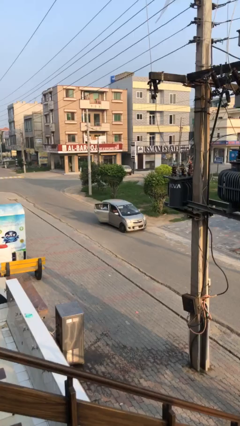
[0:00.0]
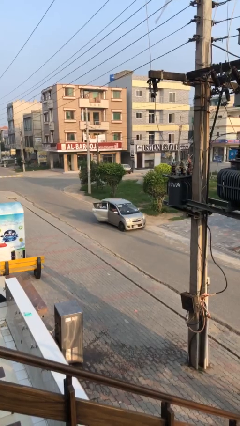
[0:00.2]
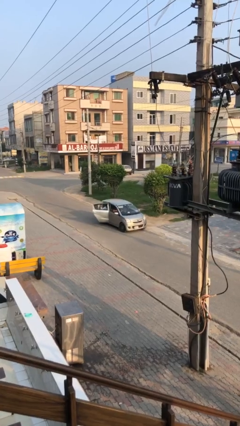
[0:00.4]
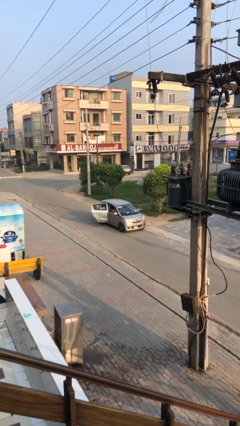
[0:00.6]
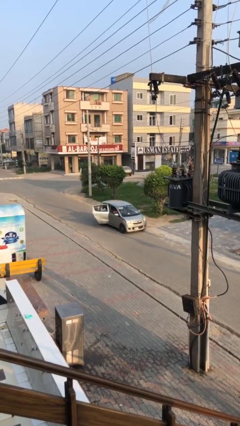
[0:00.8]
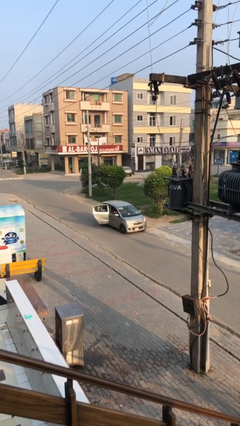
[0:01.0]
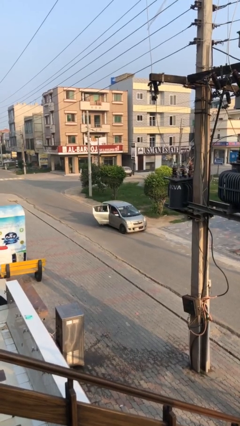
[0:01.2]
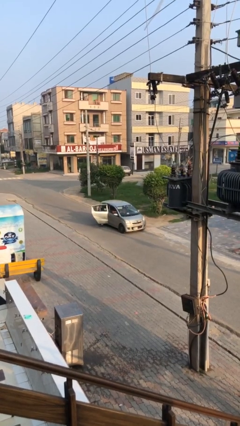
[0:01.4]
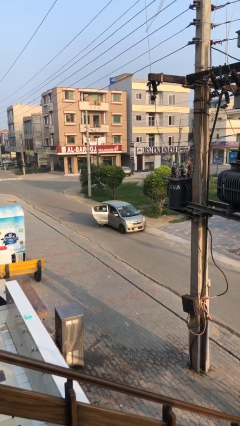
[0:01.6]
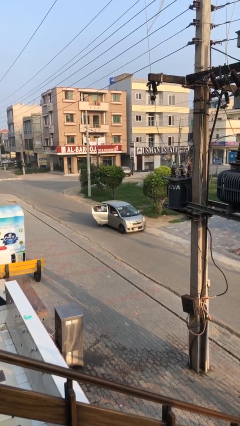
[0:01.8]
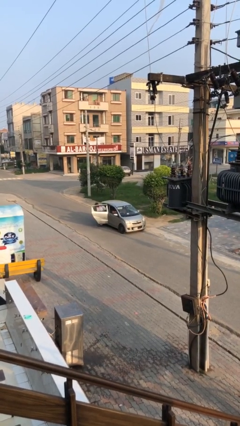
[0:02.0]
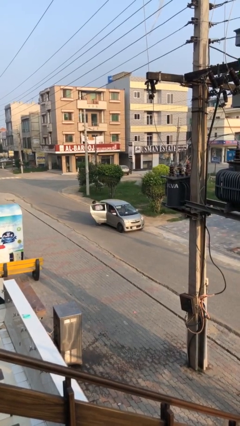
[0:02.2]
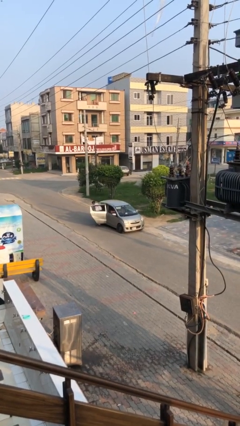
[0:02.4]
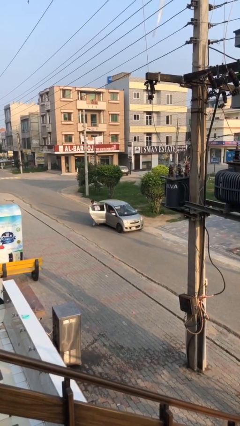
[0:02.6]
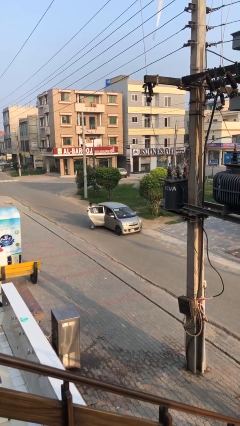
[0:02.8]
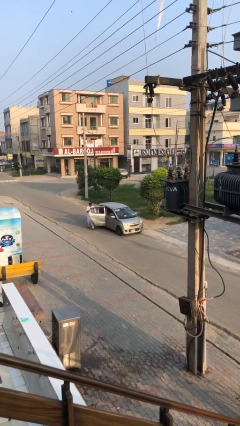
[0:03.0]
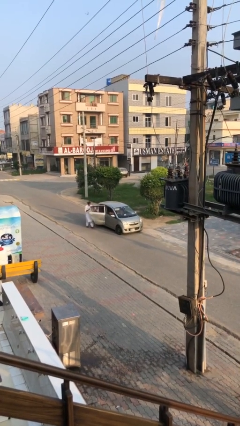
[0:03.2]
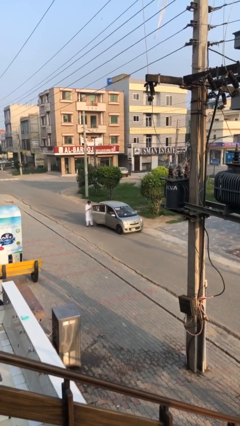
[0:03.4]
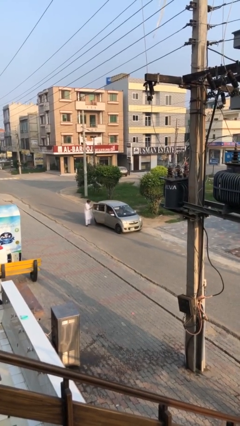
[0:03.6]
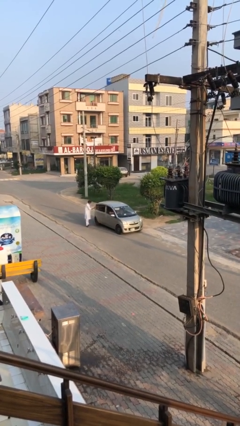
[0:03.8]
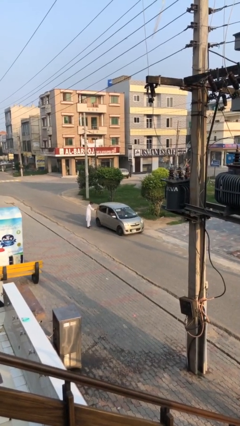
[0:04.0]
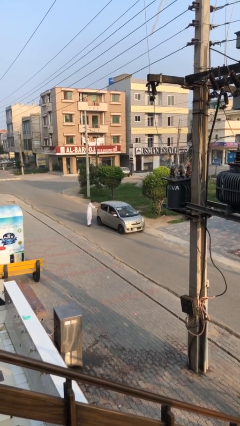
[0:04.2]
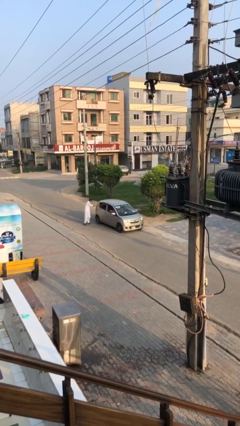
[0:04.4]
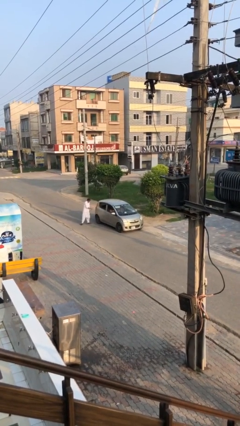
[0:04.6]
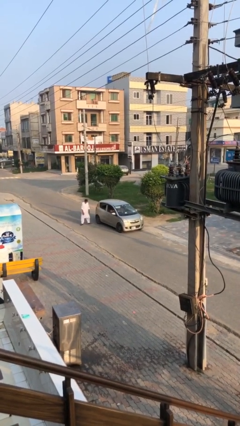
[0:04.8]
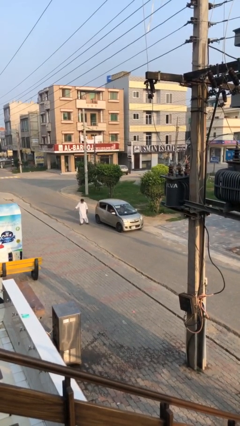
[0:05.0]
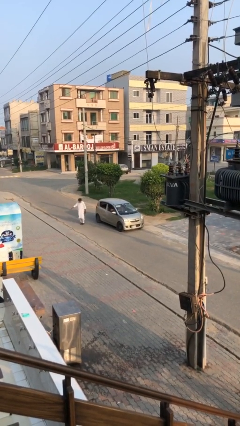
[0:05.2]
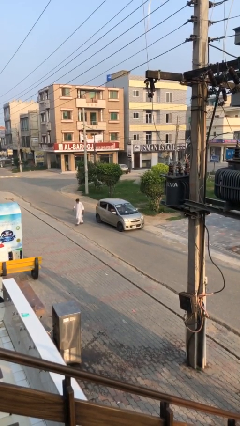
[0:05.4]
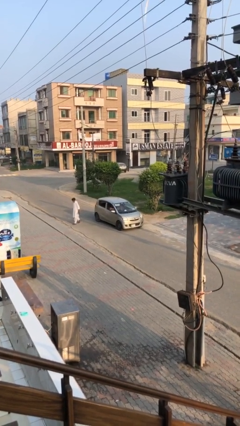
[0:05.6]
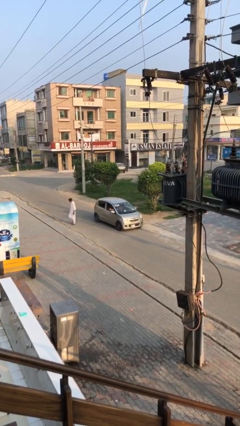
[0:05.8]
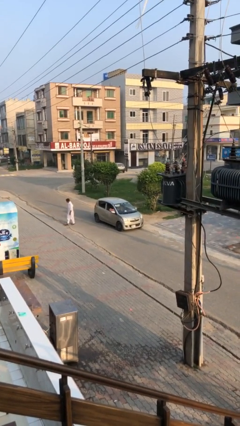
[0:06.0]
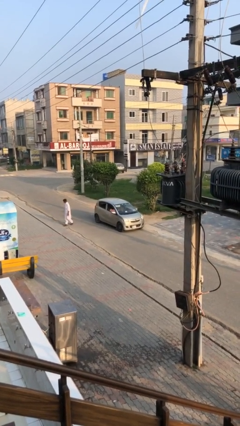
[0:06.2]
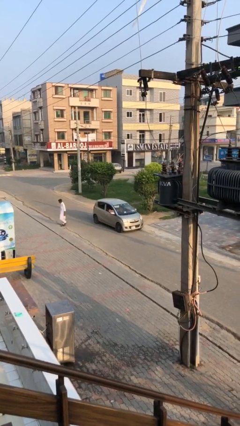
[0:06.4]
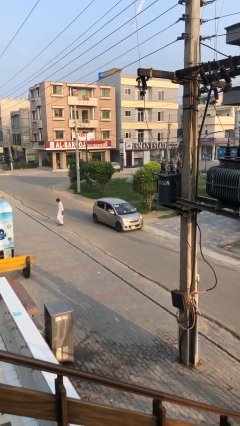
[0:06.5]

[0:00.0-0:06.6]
car drops off person

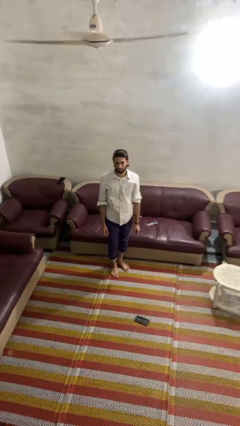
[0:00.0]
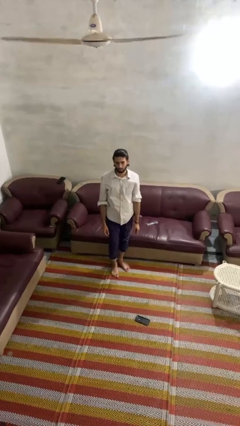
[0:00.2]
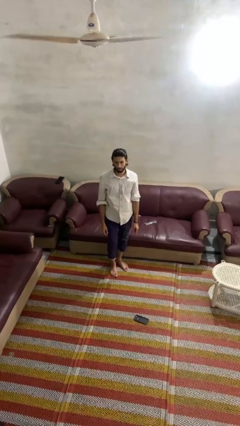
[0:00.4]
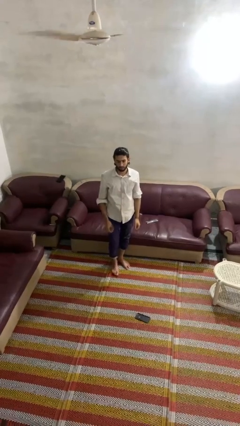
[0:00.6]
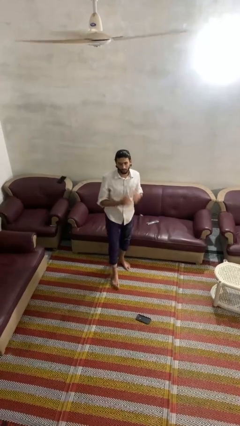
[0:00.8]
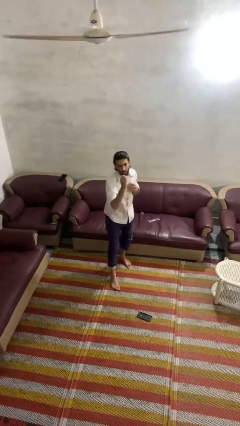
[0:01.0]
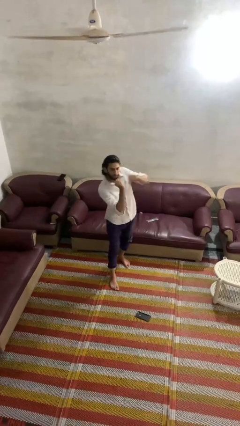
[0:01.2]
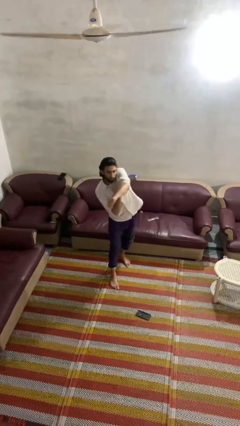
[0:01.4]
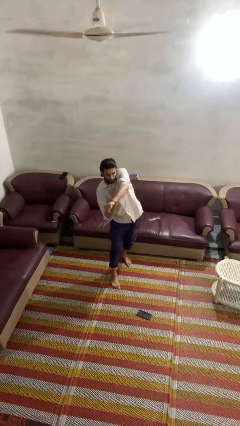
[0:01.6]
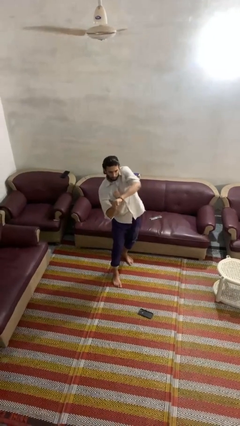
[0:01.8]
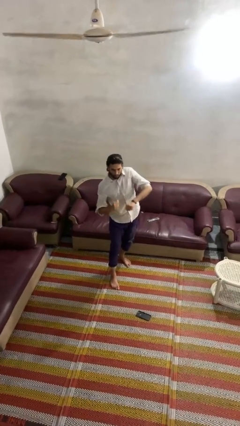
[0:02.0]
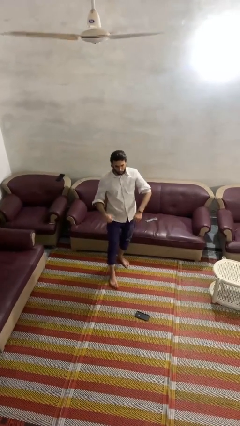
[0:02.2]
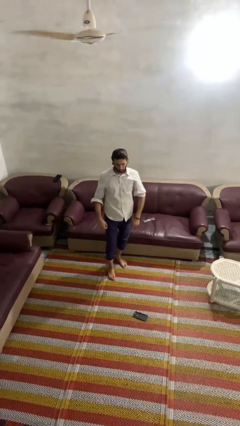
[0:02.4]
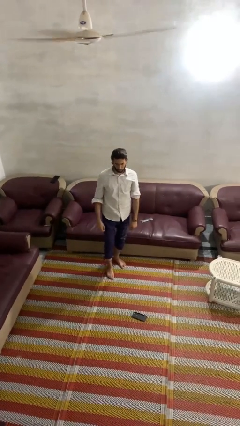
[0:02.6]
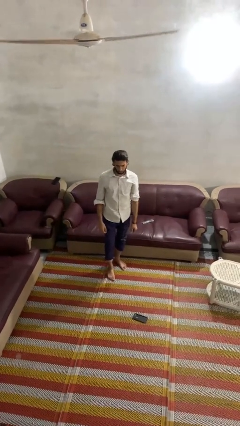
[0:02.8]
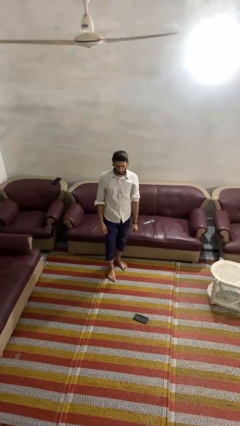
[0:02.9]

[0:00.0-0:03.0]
person punches

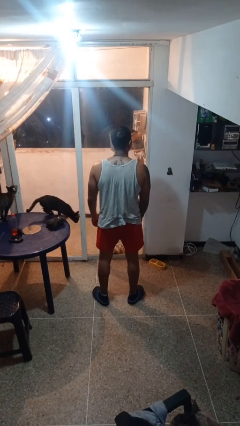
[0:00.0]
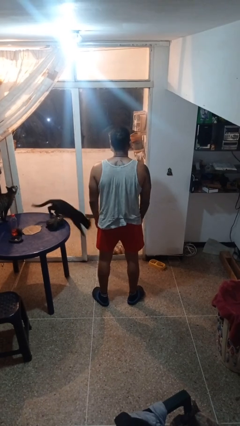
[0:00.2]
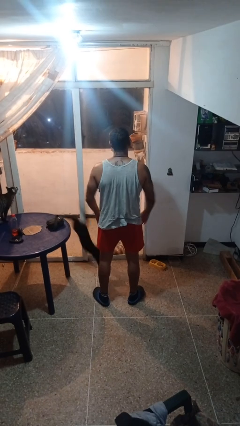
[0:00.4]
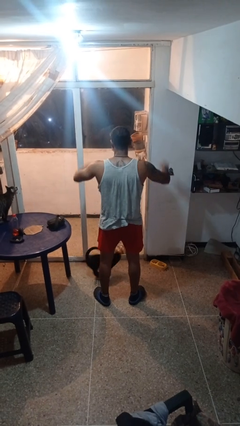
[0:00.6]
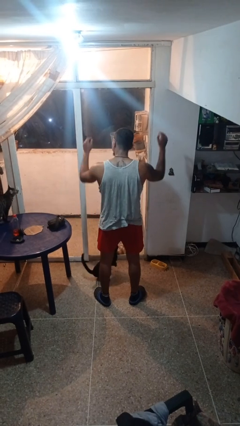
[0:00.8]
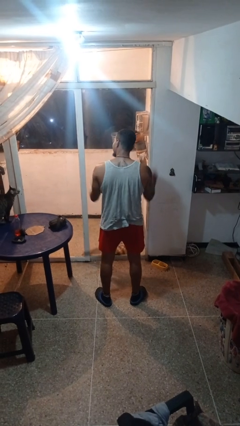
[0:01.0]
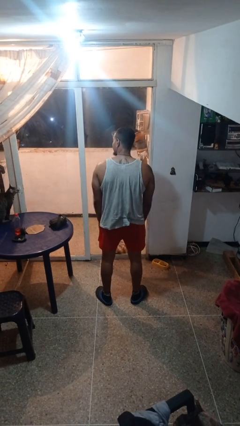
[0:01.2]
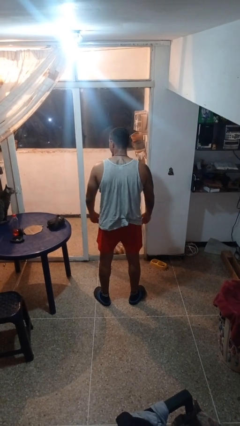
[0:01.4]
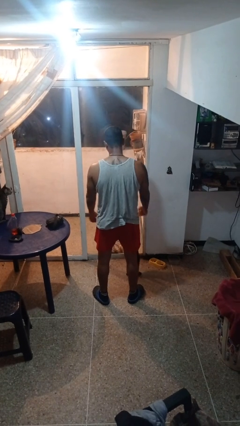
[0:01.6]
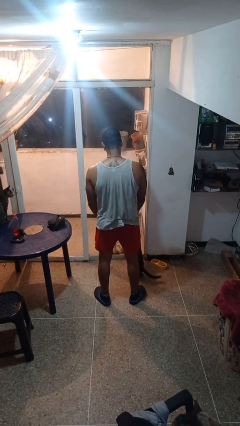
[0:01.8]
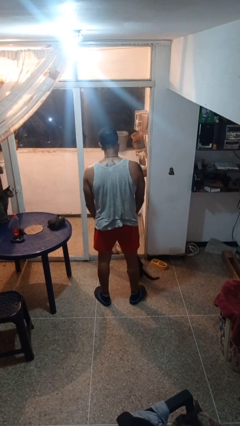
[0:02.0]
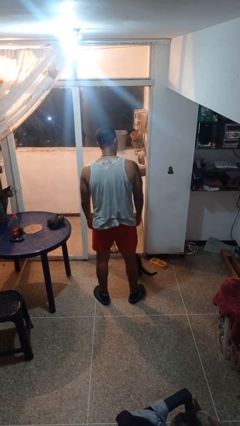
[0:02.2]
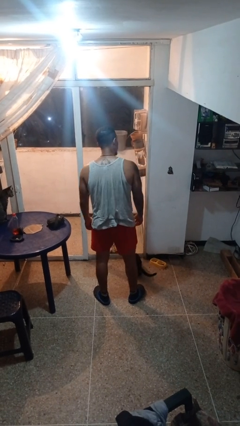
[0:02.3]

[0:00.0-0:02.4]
person slaps hands on thighs

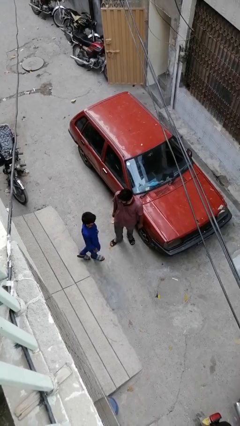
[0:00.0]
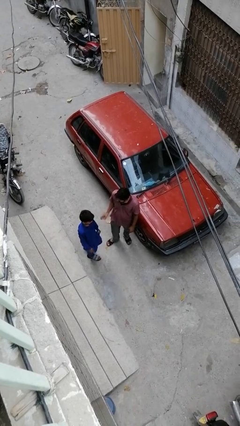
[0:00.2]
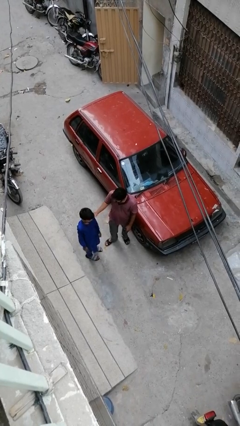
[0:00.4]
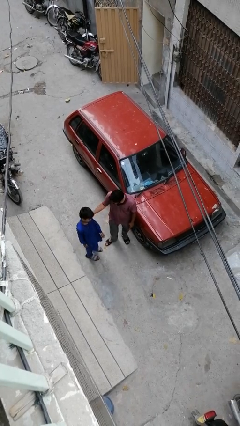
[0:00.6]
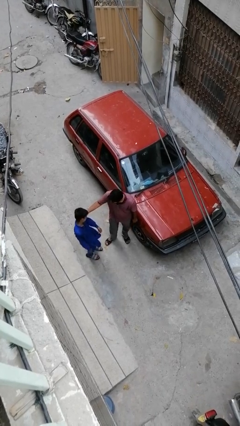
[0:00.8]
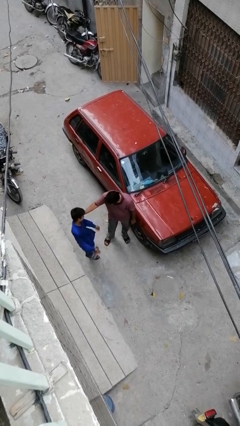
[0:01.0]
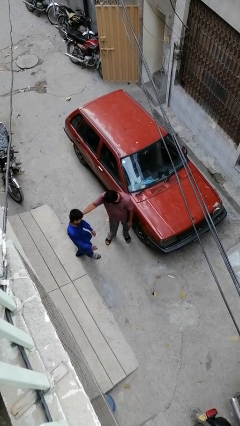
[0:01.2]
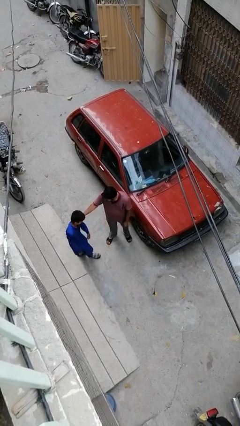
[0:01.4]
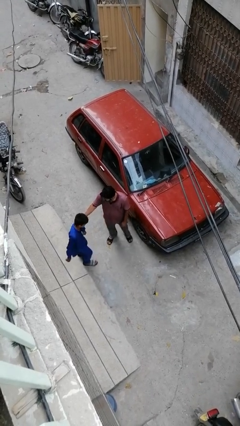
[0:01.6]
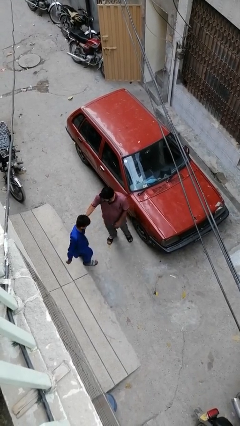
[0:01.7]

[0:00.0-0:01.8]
person grabs person by shoulder

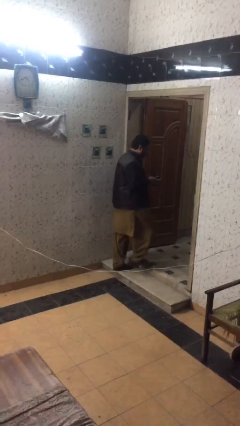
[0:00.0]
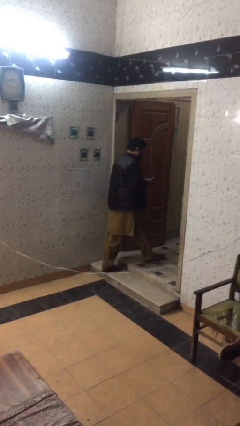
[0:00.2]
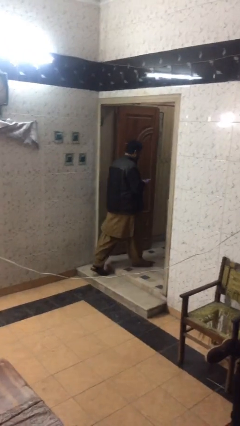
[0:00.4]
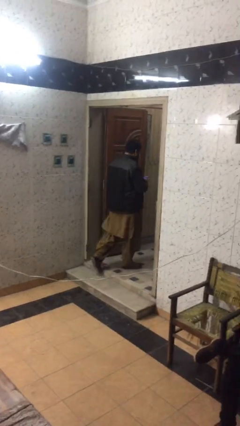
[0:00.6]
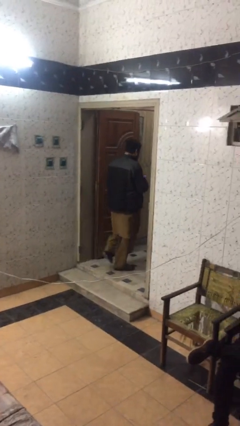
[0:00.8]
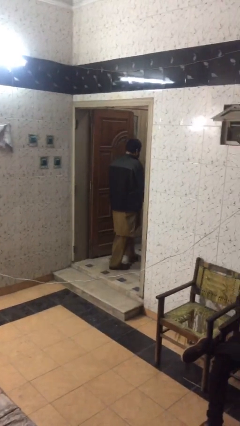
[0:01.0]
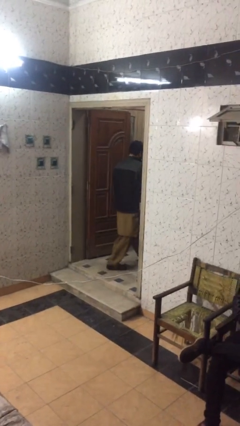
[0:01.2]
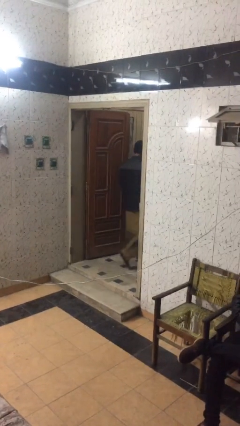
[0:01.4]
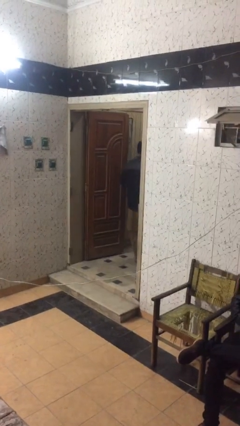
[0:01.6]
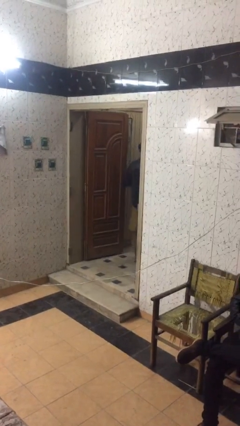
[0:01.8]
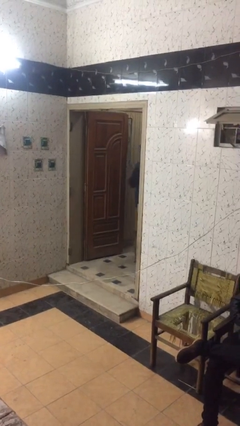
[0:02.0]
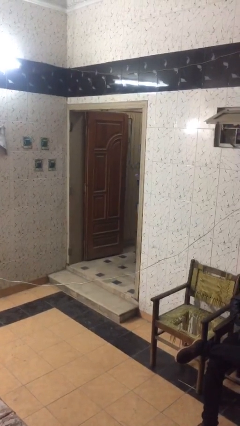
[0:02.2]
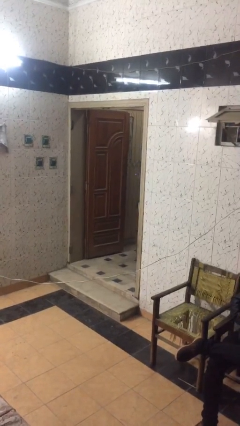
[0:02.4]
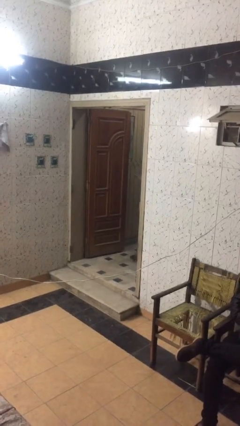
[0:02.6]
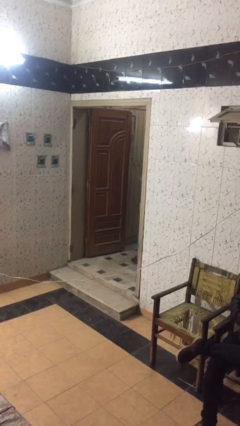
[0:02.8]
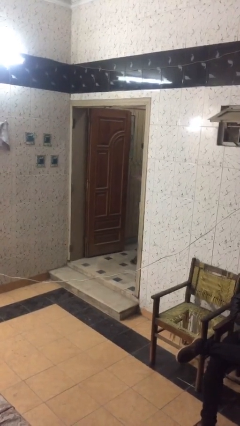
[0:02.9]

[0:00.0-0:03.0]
person exits scene through structure

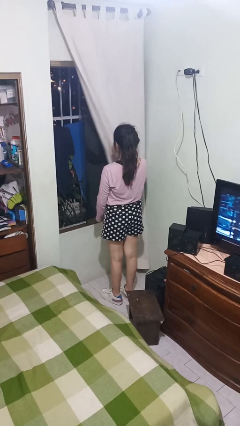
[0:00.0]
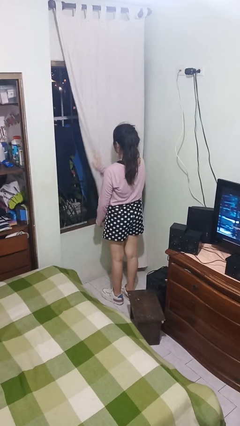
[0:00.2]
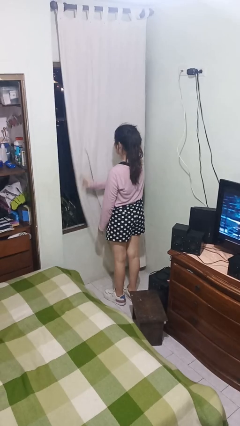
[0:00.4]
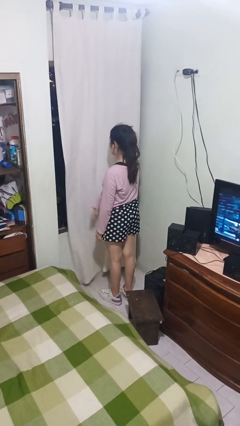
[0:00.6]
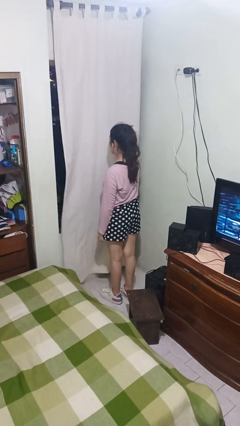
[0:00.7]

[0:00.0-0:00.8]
person closes curtains

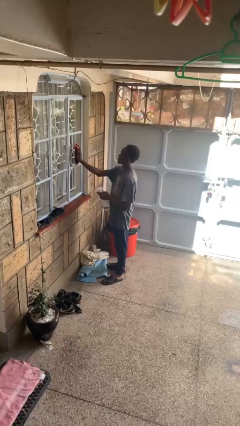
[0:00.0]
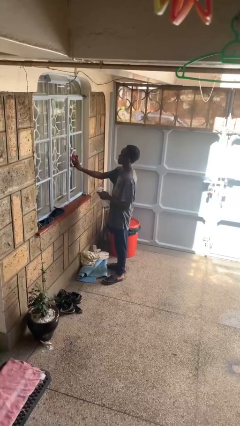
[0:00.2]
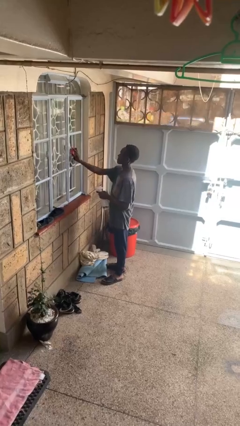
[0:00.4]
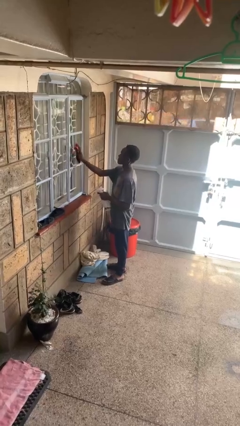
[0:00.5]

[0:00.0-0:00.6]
person washes window
